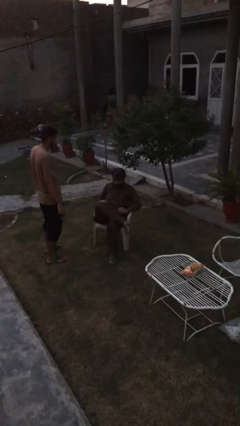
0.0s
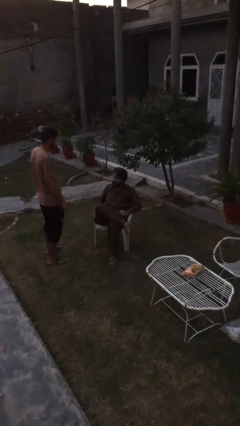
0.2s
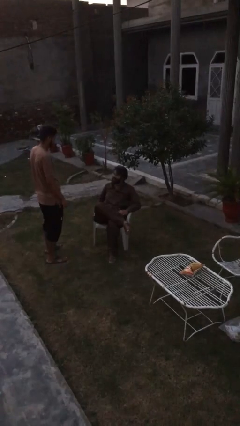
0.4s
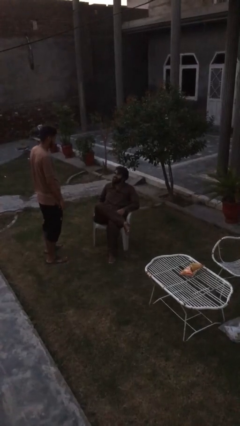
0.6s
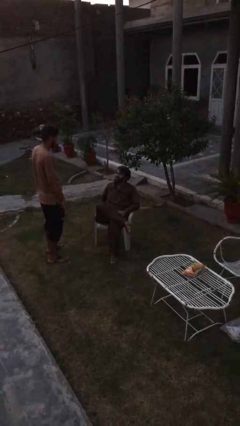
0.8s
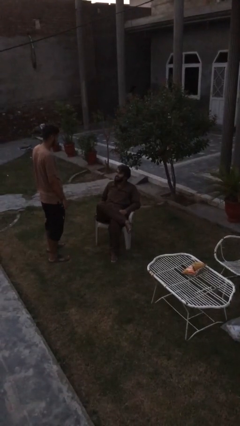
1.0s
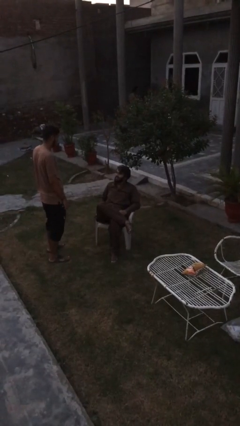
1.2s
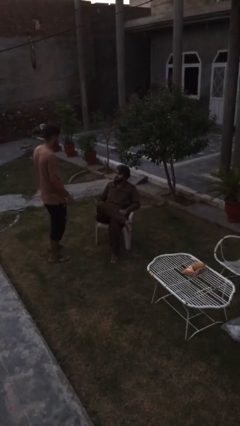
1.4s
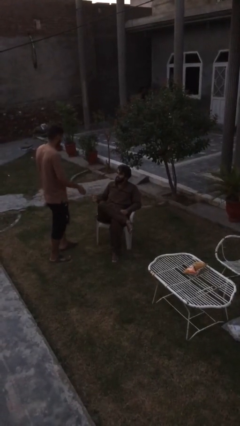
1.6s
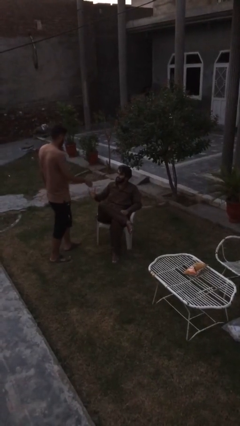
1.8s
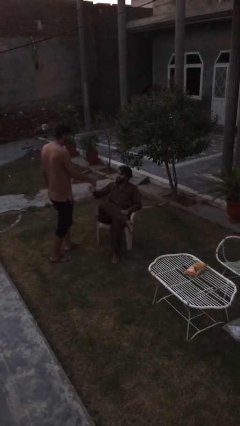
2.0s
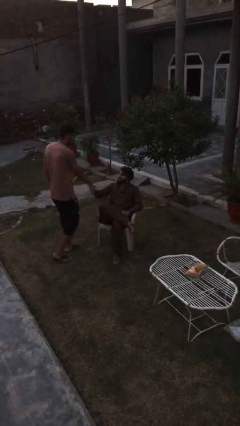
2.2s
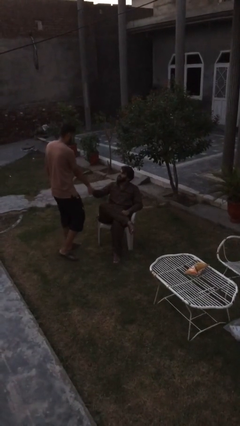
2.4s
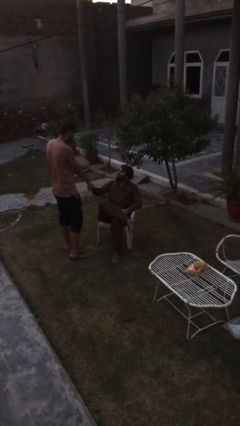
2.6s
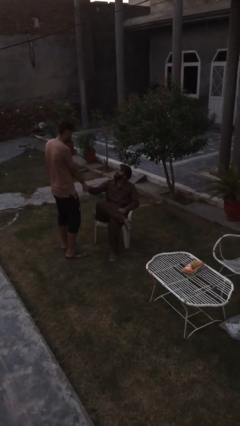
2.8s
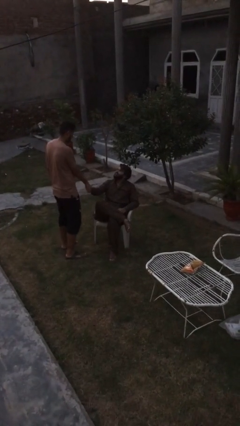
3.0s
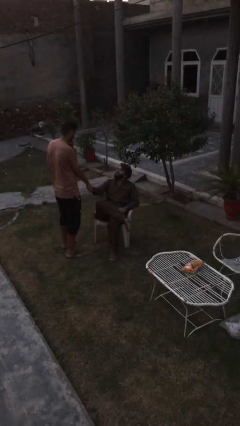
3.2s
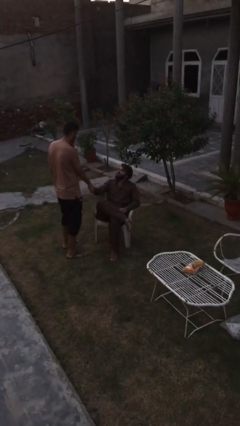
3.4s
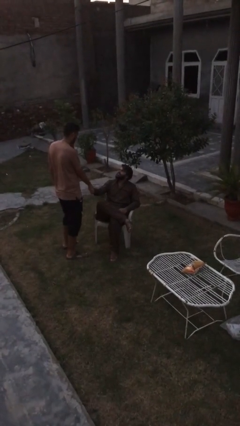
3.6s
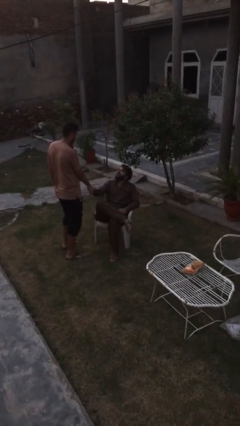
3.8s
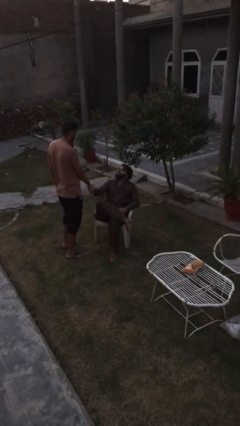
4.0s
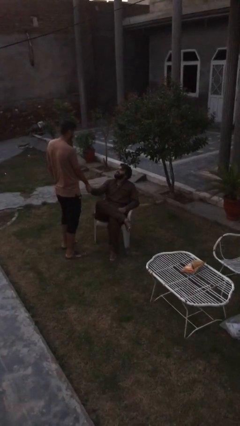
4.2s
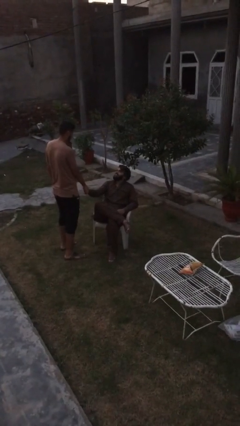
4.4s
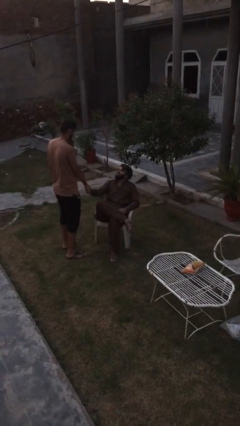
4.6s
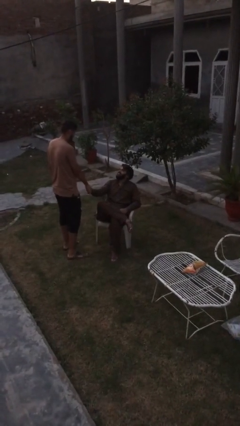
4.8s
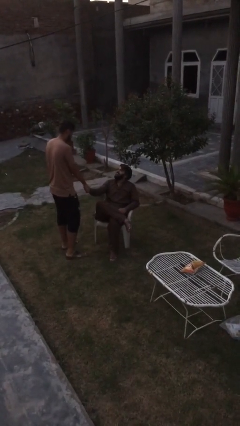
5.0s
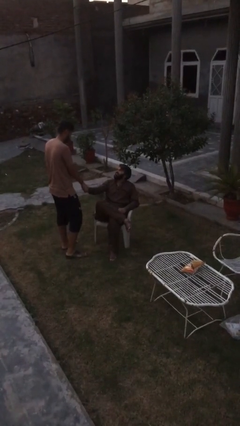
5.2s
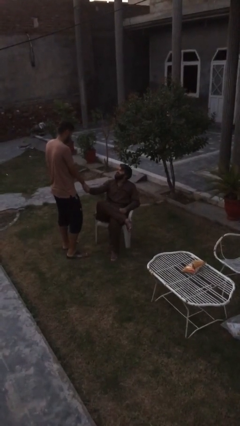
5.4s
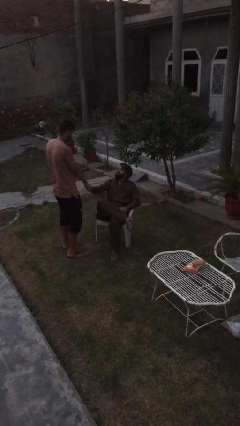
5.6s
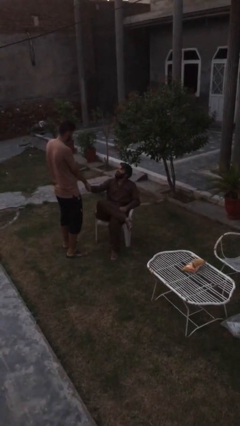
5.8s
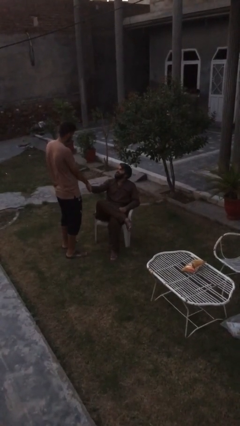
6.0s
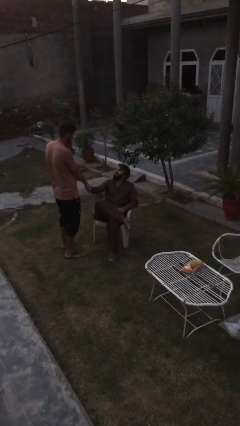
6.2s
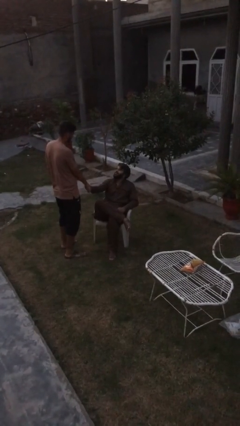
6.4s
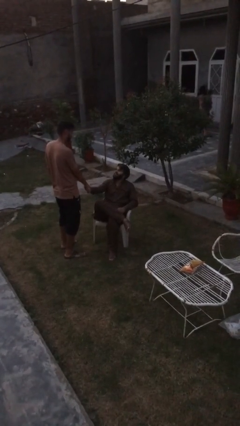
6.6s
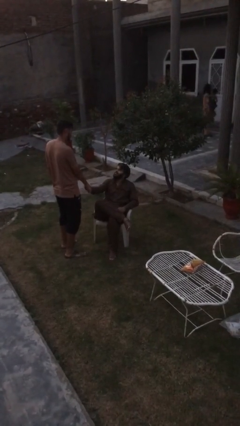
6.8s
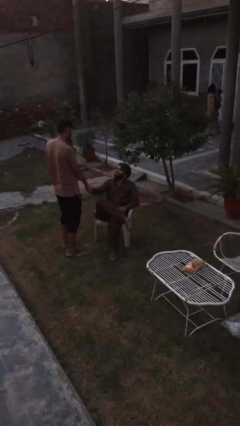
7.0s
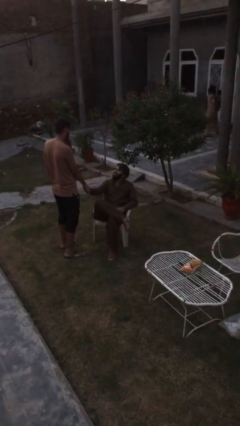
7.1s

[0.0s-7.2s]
person shakes hand

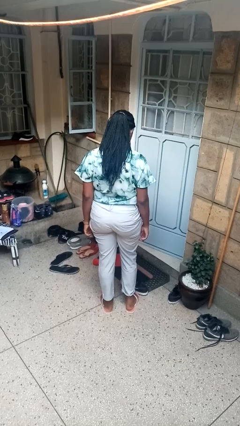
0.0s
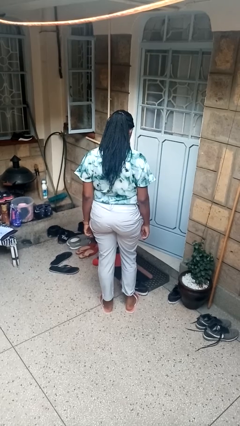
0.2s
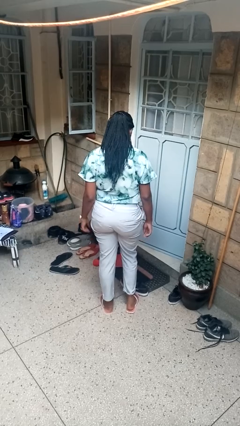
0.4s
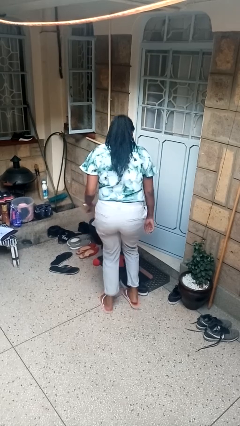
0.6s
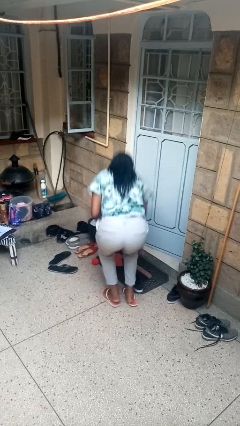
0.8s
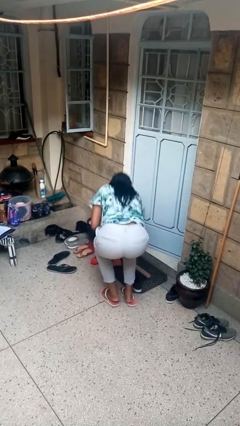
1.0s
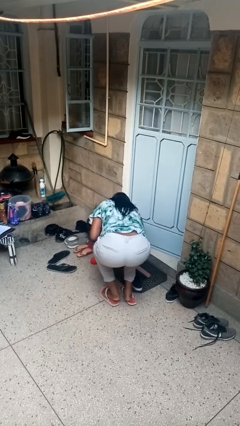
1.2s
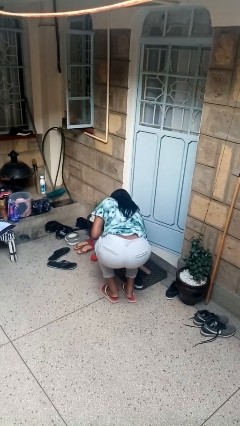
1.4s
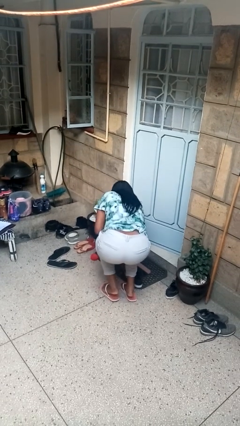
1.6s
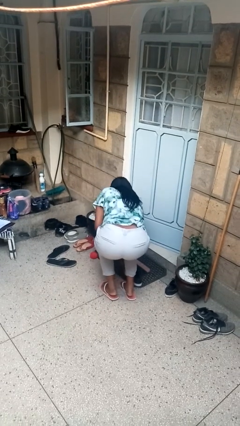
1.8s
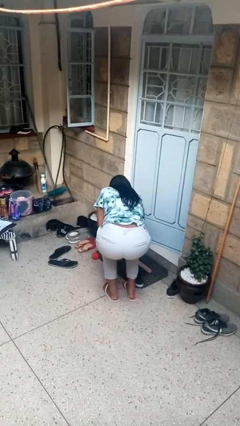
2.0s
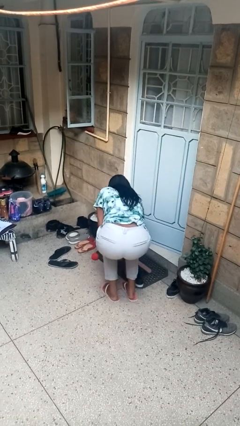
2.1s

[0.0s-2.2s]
person trips on object on floor

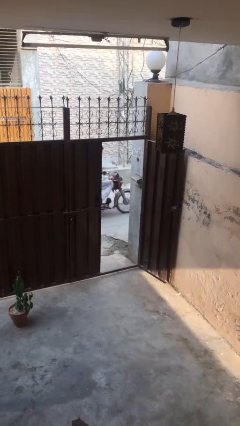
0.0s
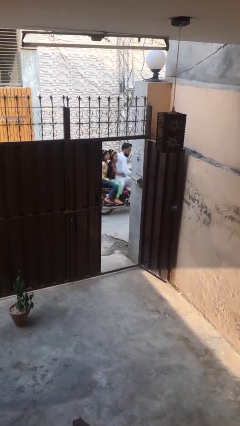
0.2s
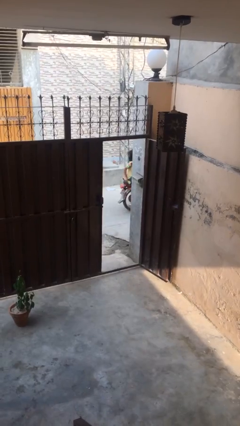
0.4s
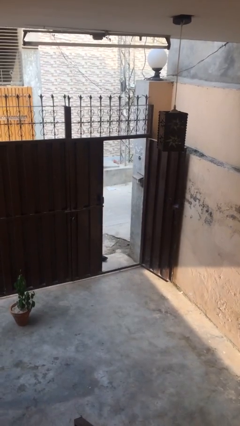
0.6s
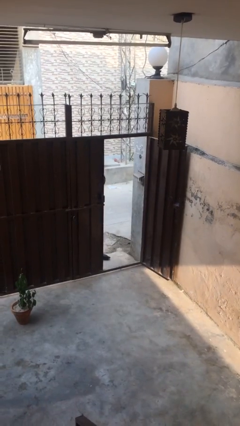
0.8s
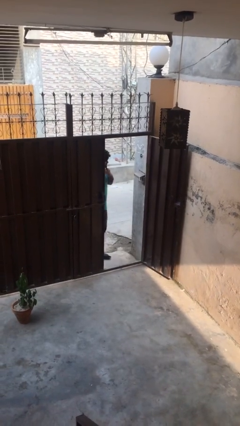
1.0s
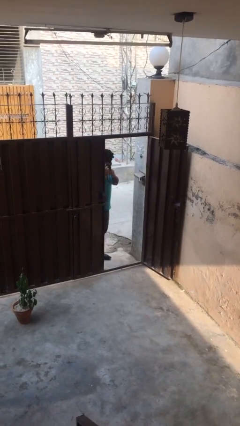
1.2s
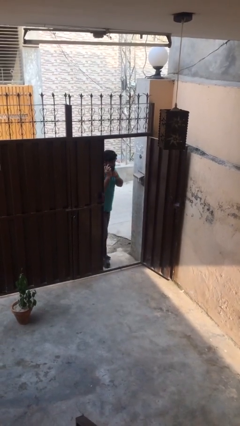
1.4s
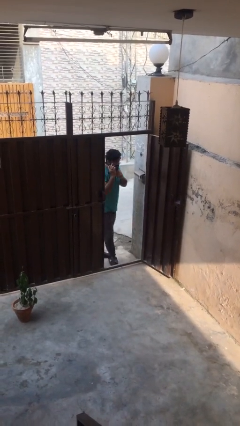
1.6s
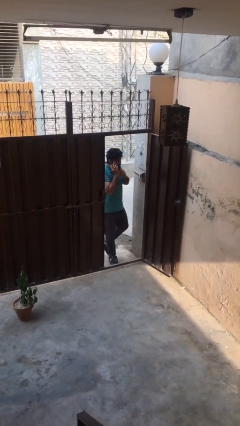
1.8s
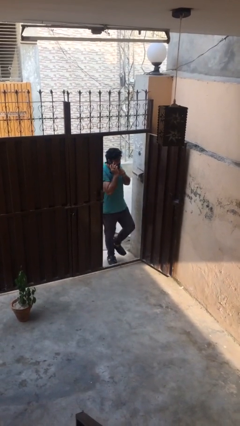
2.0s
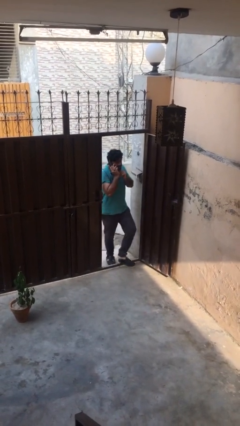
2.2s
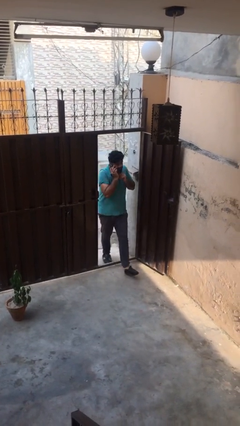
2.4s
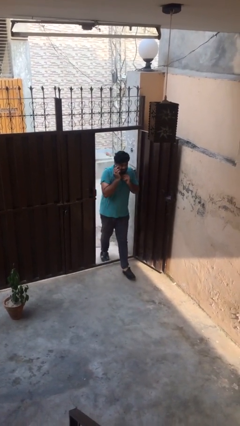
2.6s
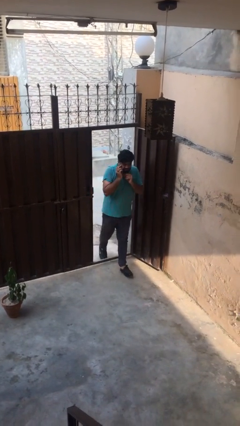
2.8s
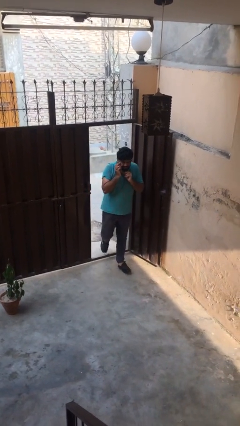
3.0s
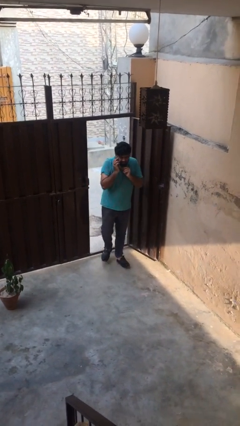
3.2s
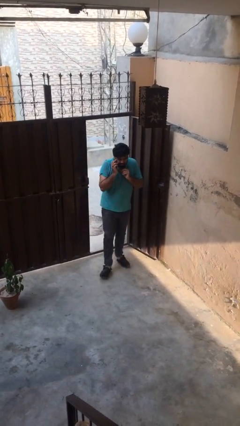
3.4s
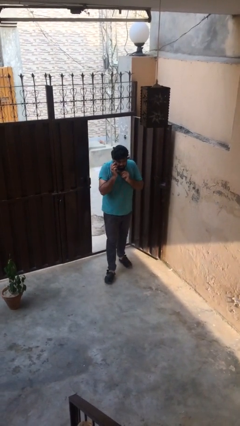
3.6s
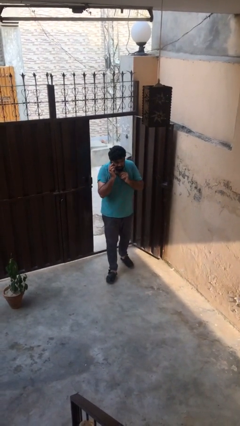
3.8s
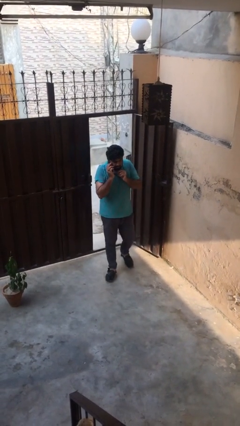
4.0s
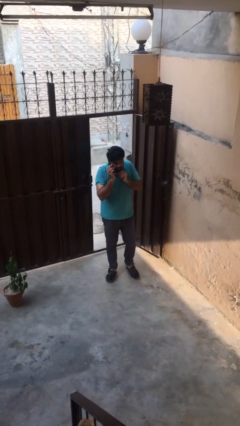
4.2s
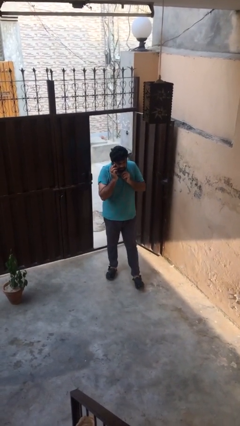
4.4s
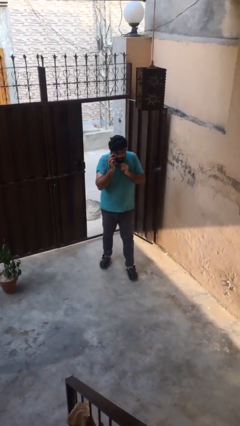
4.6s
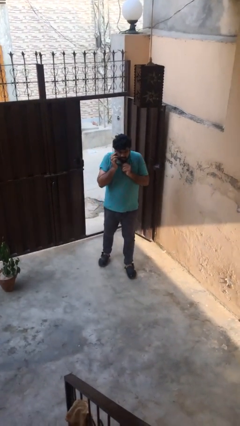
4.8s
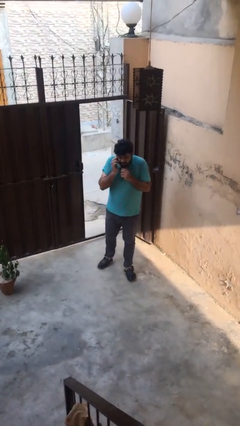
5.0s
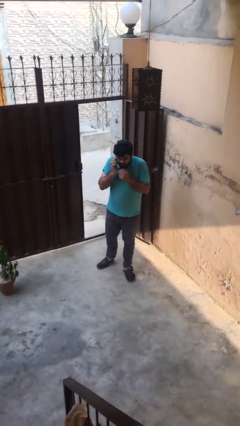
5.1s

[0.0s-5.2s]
person enters scene through structure

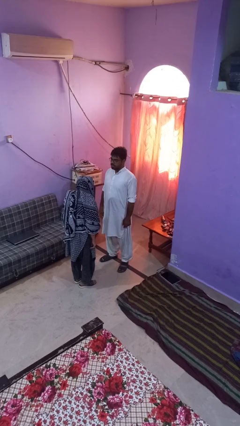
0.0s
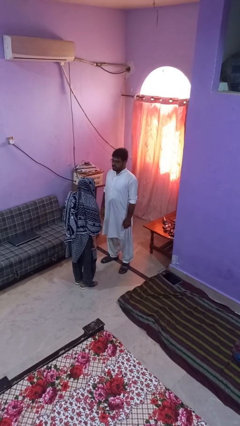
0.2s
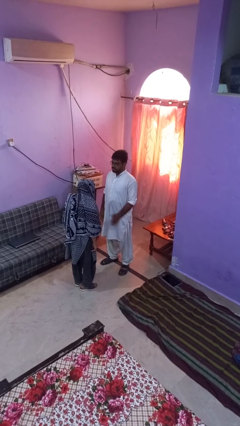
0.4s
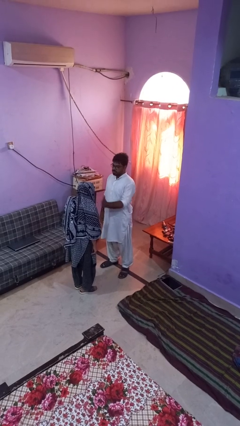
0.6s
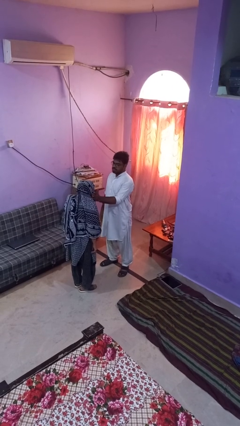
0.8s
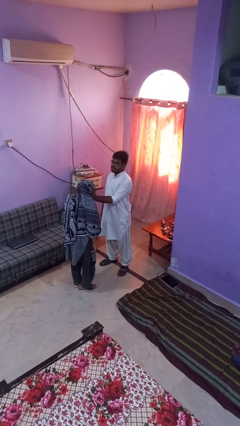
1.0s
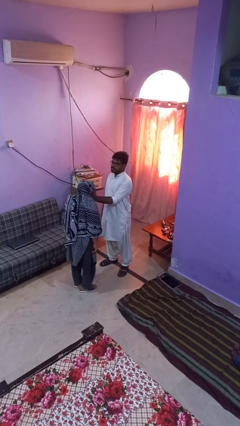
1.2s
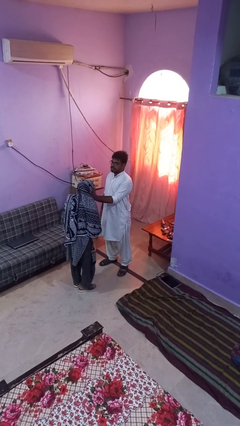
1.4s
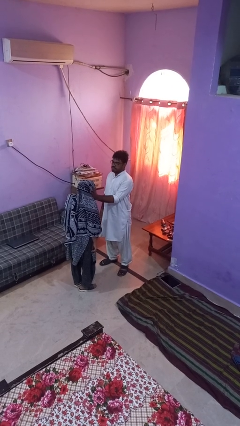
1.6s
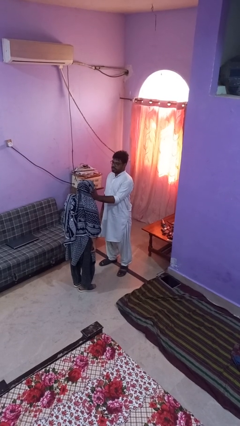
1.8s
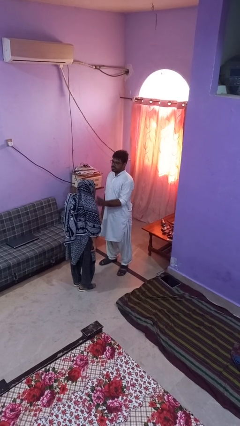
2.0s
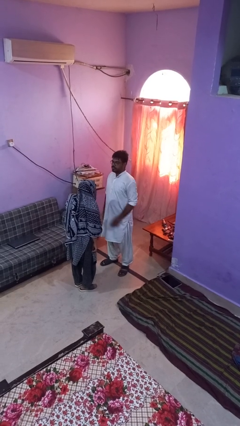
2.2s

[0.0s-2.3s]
person touches face of person

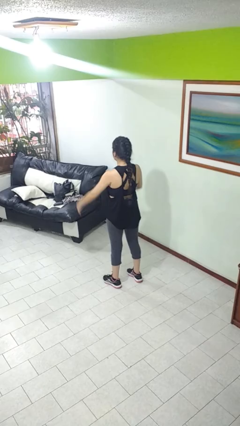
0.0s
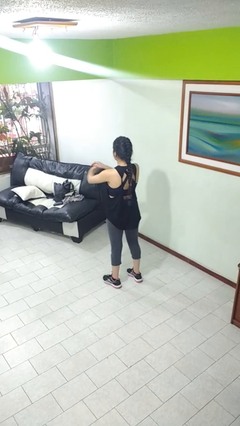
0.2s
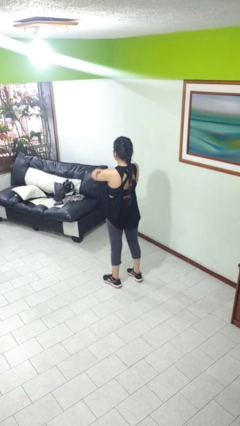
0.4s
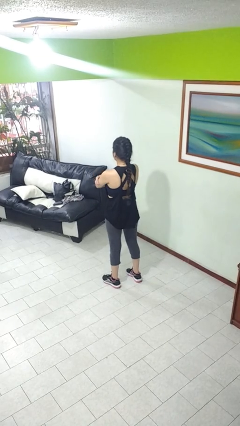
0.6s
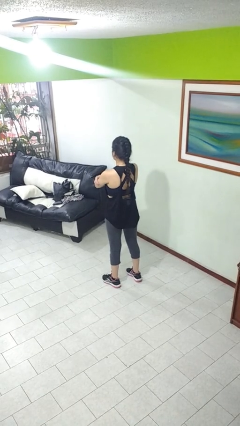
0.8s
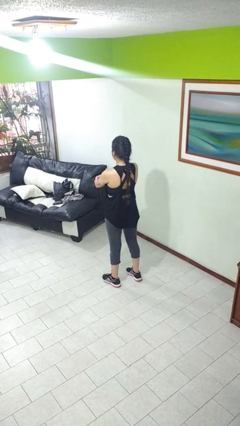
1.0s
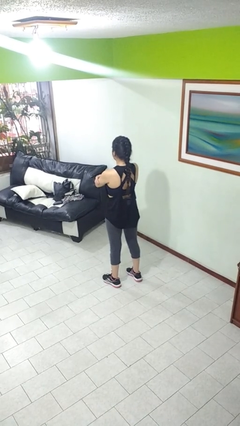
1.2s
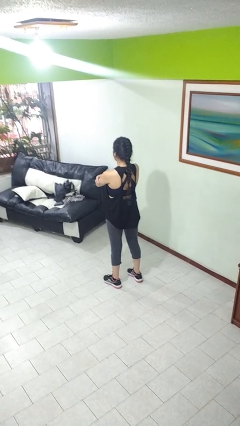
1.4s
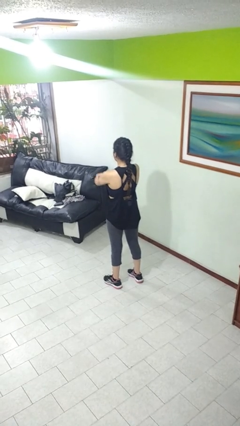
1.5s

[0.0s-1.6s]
person crosses arms
